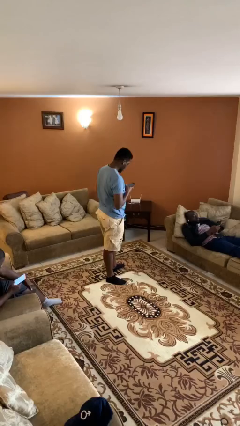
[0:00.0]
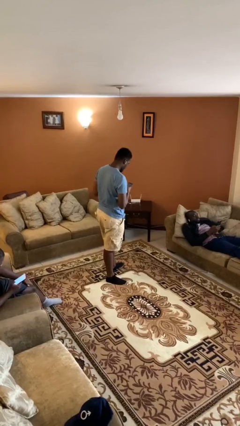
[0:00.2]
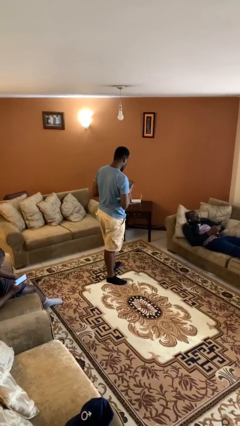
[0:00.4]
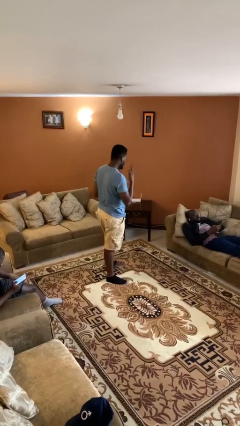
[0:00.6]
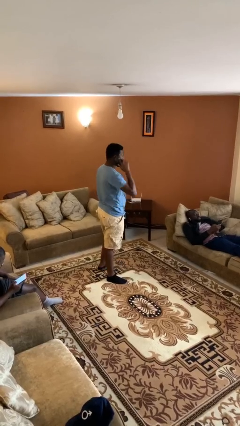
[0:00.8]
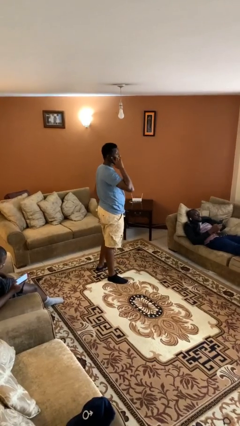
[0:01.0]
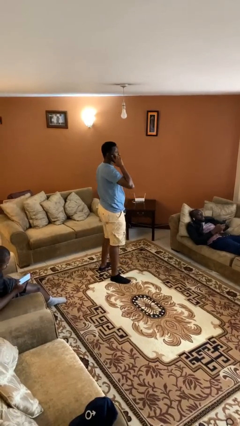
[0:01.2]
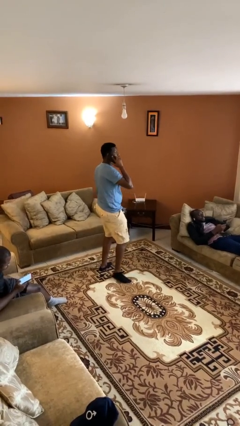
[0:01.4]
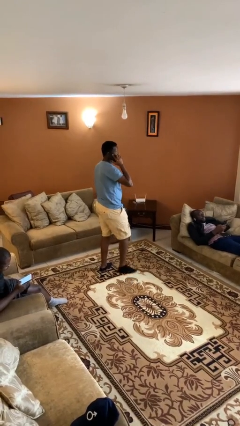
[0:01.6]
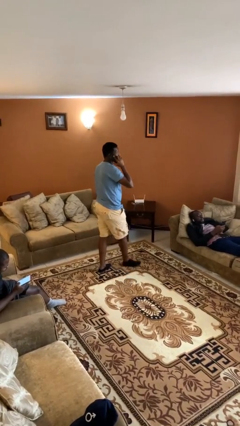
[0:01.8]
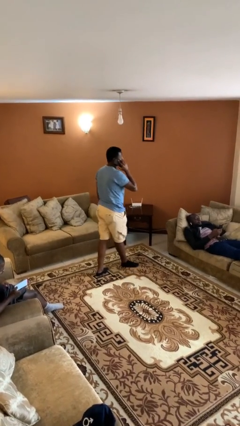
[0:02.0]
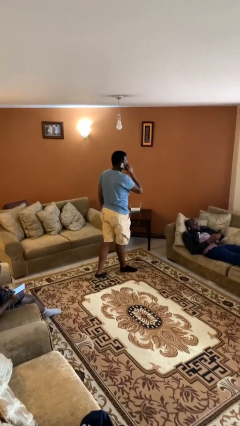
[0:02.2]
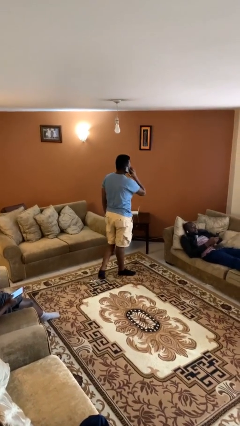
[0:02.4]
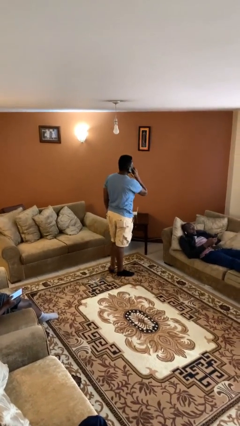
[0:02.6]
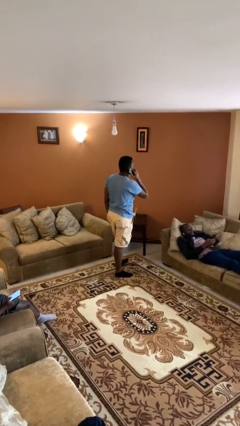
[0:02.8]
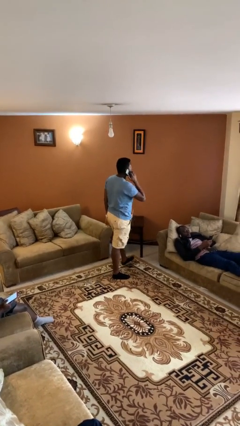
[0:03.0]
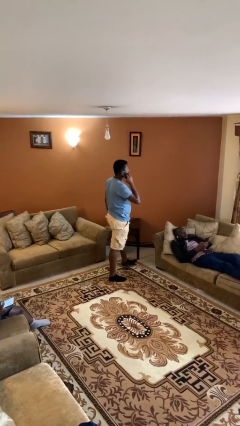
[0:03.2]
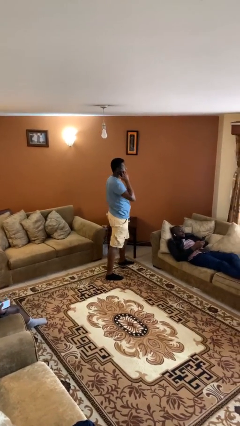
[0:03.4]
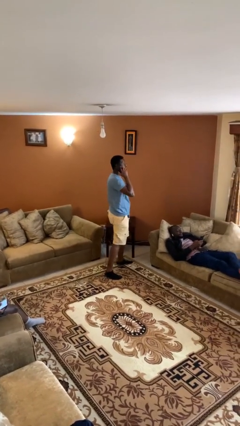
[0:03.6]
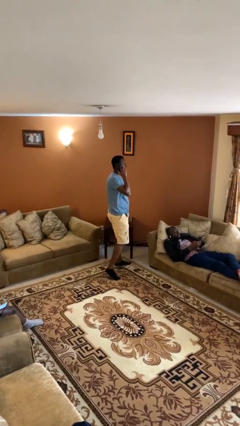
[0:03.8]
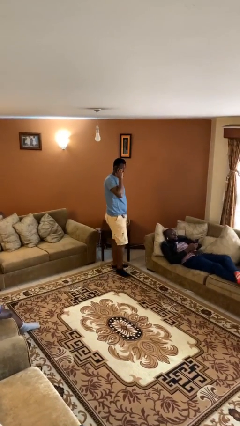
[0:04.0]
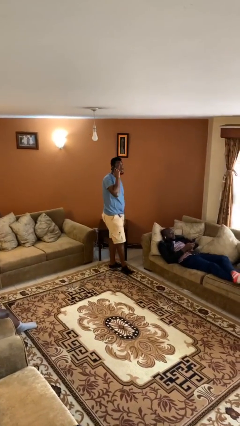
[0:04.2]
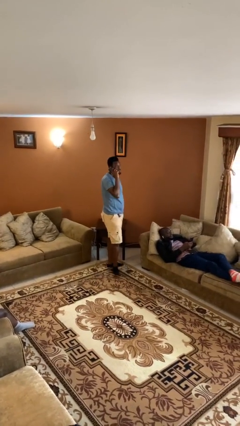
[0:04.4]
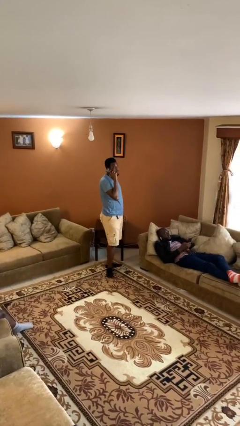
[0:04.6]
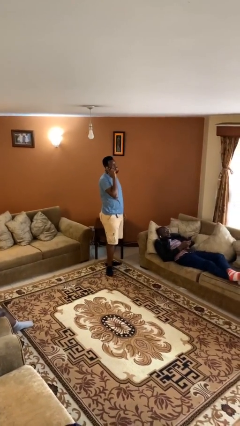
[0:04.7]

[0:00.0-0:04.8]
person talks on phone

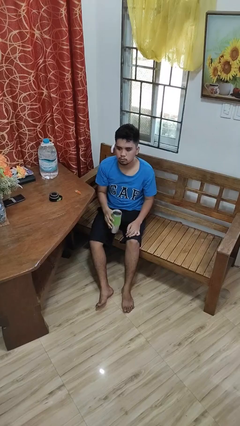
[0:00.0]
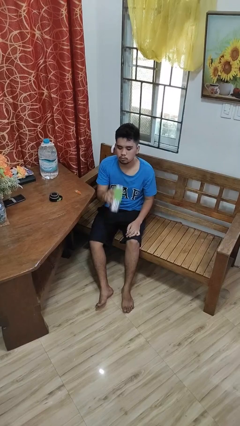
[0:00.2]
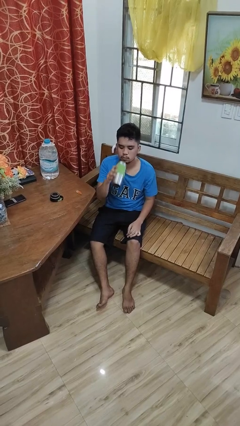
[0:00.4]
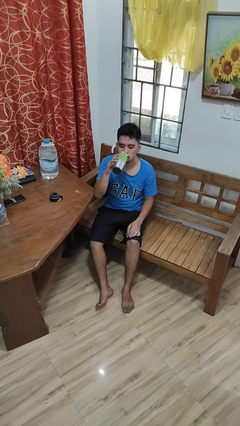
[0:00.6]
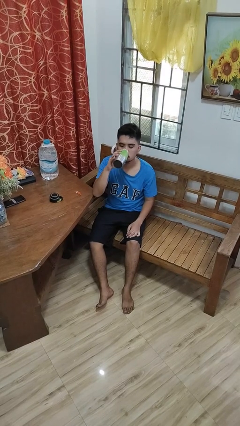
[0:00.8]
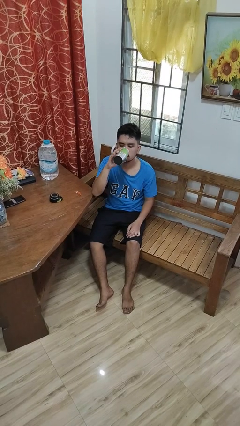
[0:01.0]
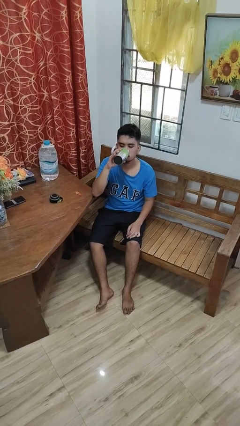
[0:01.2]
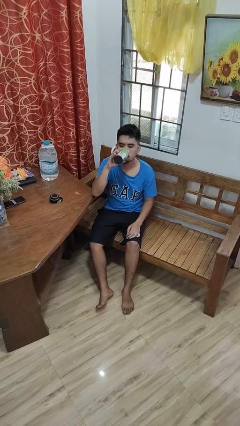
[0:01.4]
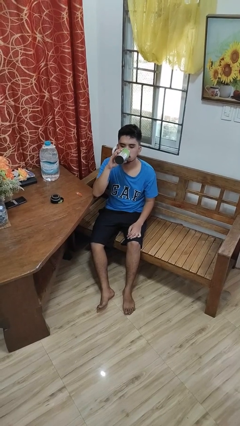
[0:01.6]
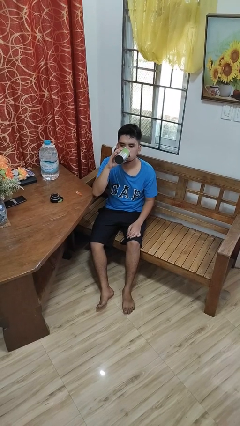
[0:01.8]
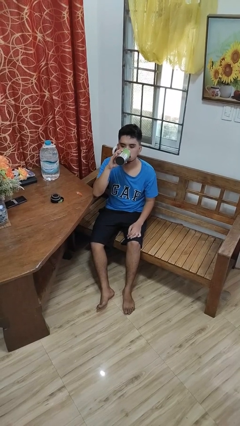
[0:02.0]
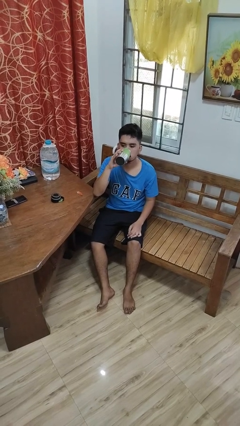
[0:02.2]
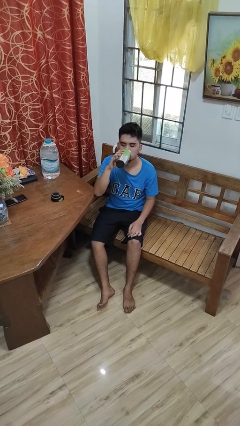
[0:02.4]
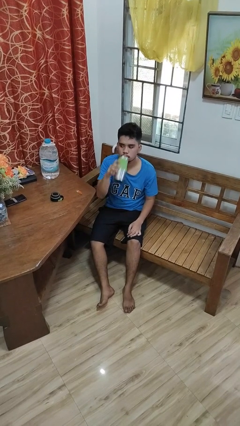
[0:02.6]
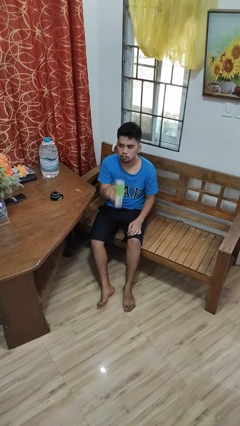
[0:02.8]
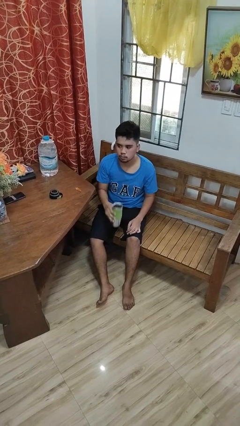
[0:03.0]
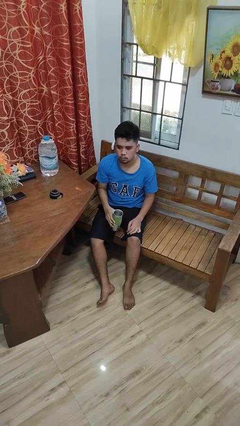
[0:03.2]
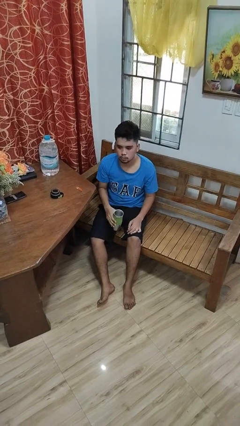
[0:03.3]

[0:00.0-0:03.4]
person drinks from bottle

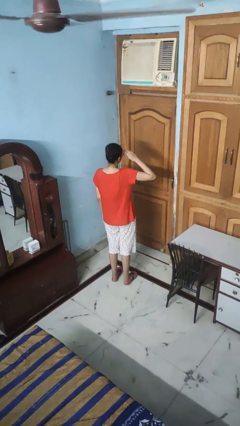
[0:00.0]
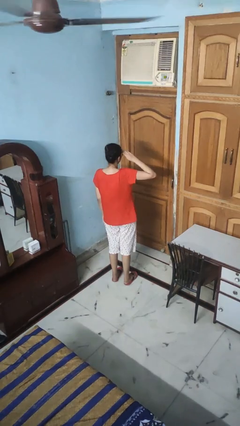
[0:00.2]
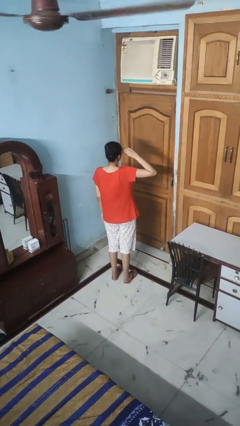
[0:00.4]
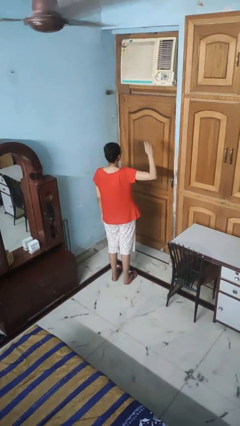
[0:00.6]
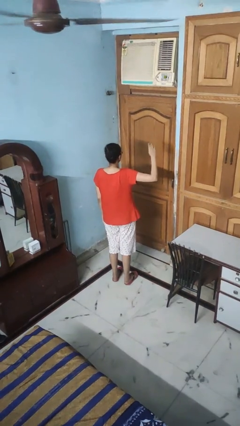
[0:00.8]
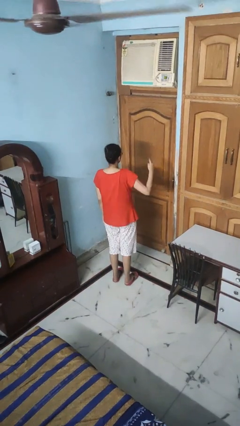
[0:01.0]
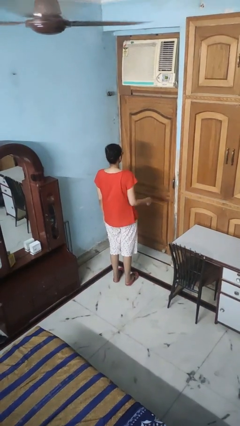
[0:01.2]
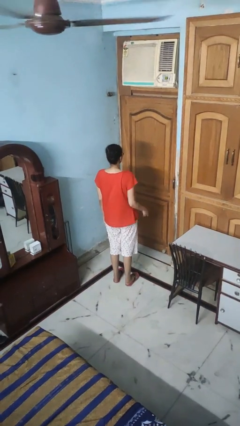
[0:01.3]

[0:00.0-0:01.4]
person salutes

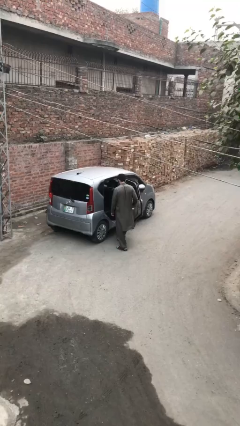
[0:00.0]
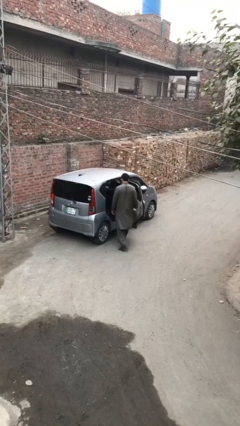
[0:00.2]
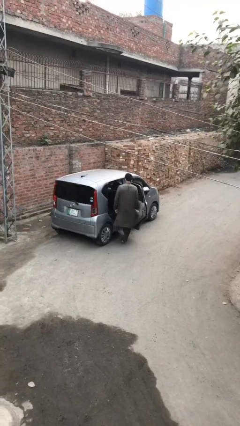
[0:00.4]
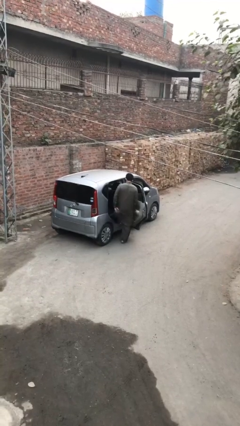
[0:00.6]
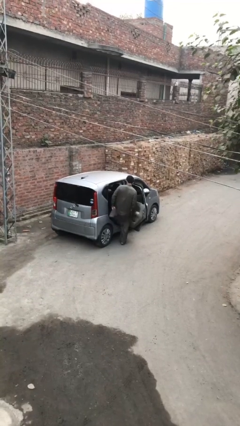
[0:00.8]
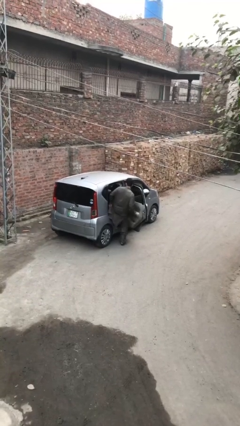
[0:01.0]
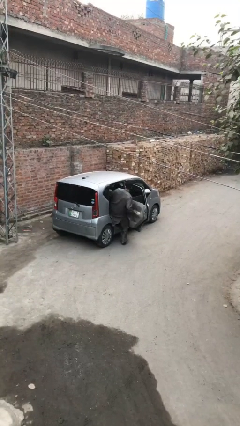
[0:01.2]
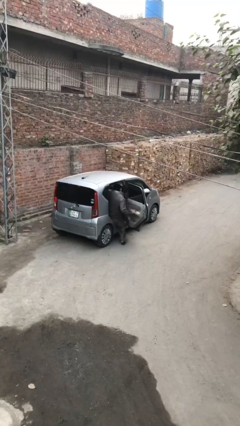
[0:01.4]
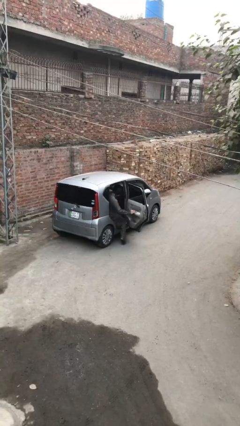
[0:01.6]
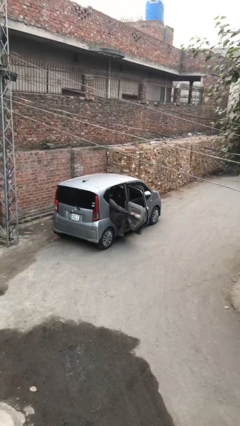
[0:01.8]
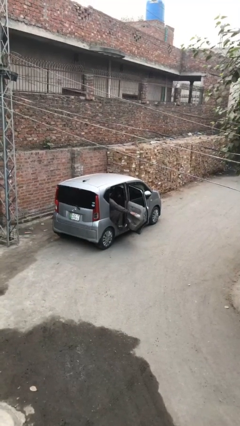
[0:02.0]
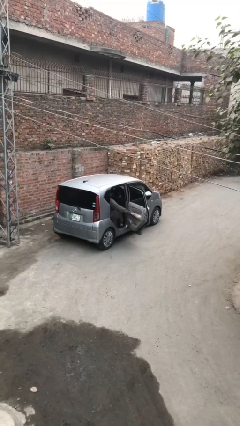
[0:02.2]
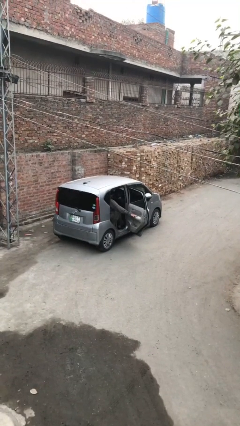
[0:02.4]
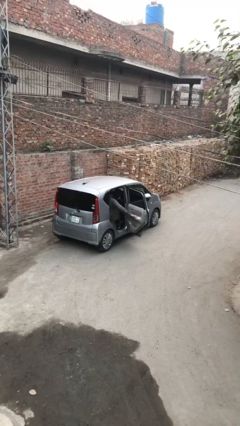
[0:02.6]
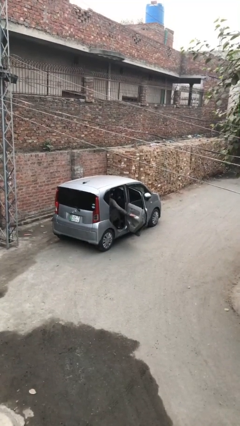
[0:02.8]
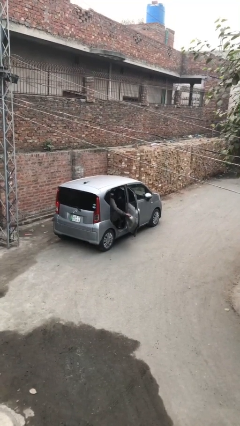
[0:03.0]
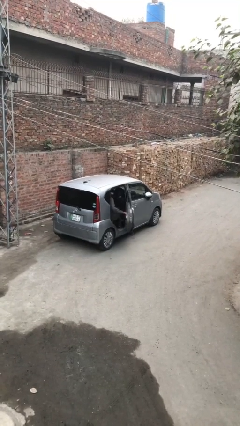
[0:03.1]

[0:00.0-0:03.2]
person enters car

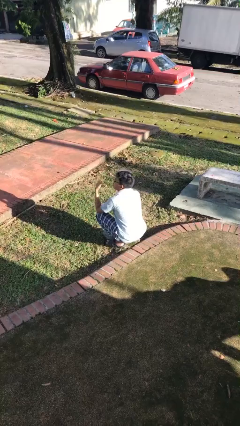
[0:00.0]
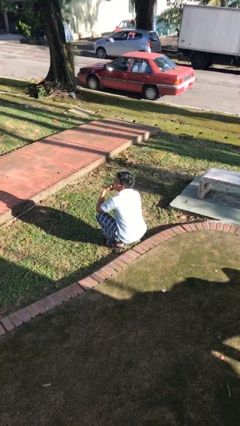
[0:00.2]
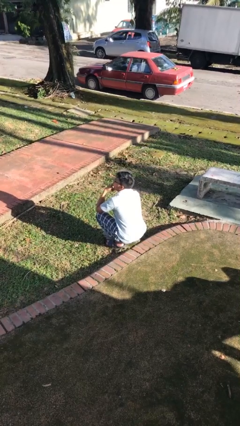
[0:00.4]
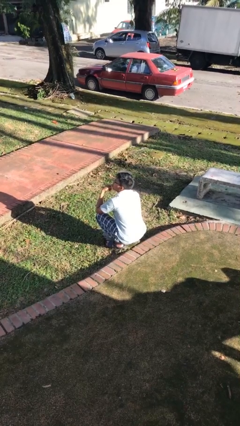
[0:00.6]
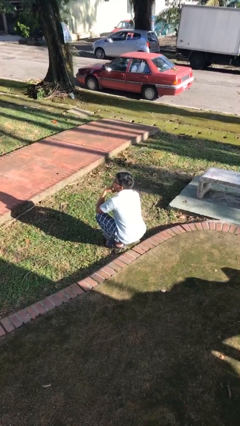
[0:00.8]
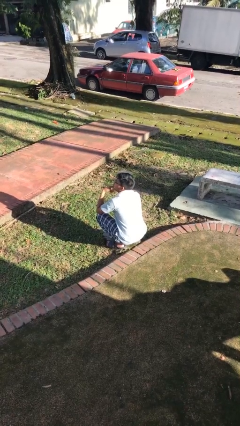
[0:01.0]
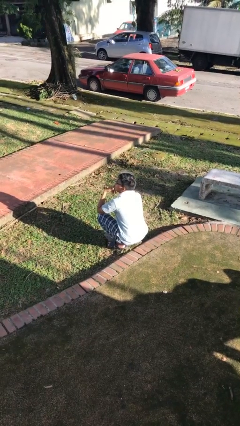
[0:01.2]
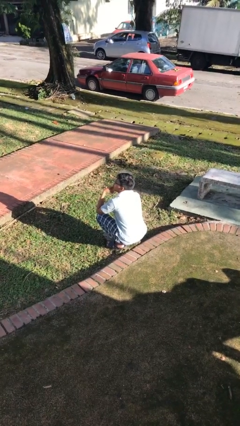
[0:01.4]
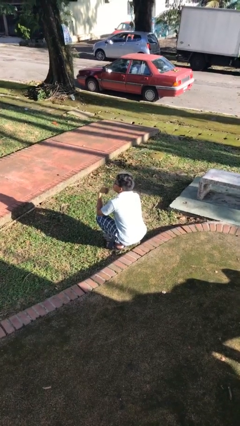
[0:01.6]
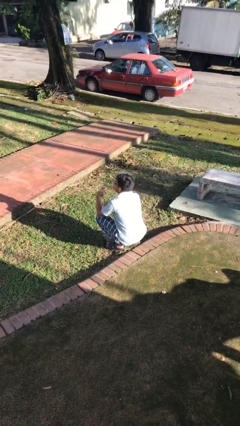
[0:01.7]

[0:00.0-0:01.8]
person strokes chin

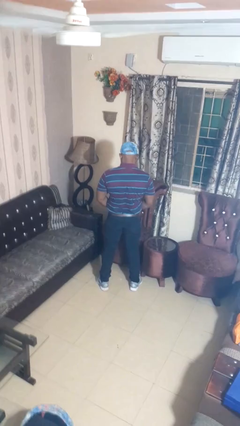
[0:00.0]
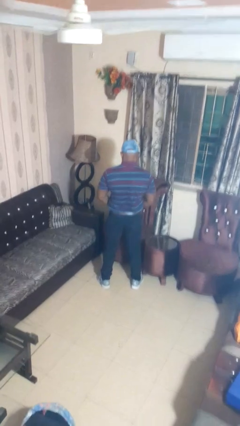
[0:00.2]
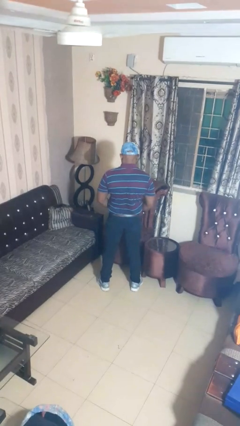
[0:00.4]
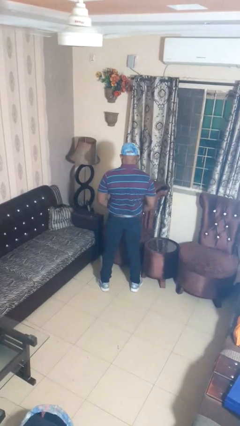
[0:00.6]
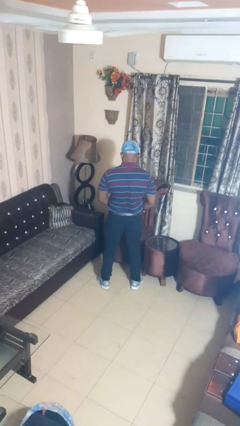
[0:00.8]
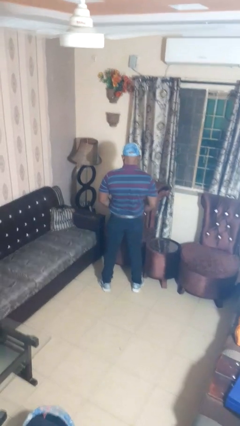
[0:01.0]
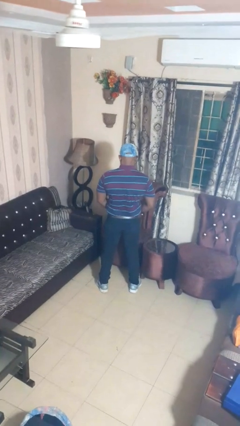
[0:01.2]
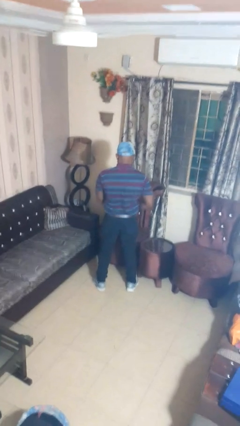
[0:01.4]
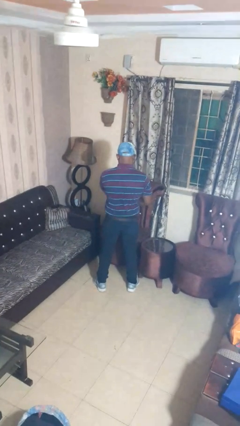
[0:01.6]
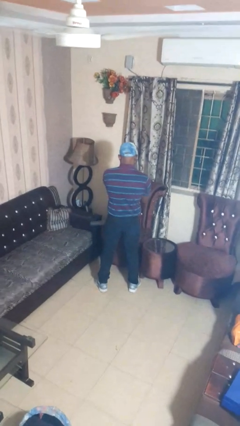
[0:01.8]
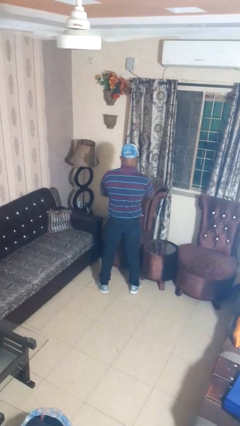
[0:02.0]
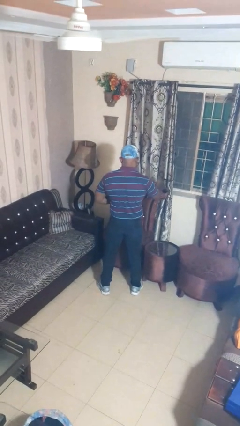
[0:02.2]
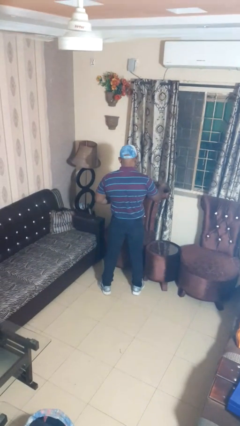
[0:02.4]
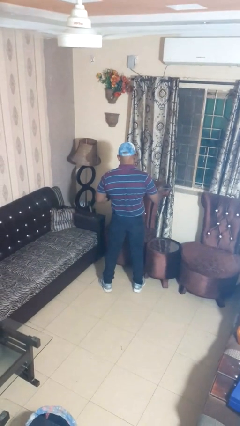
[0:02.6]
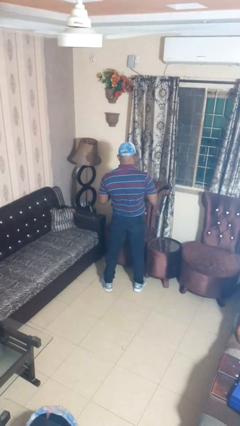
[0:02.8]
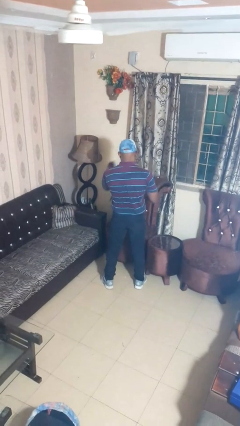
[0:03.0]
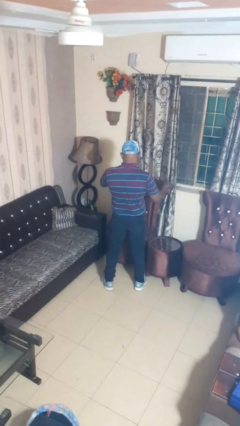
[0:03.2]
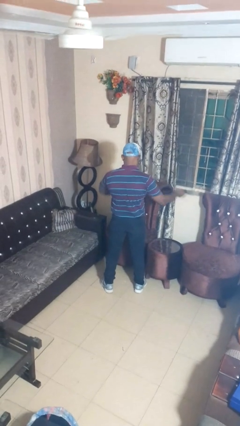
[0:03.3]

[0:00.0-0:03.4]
person takes off belt
